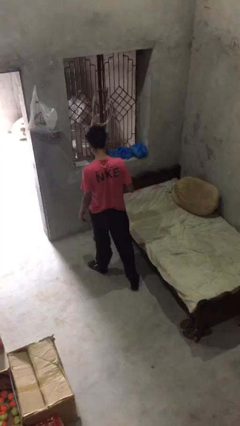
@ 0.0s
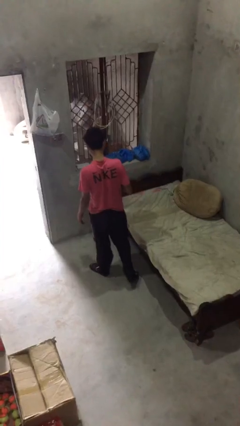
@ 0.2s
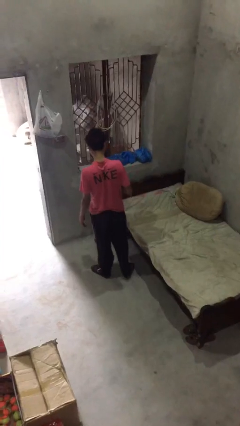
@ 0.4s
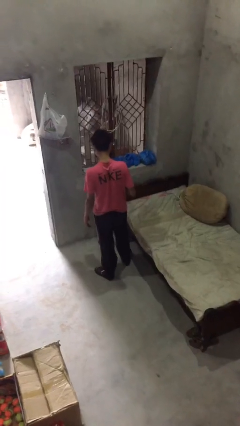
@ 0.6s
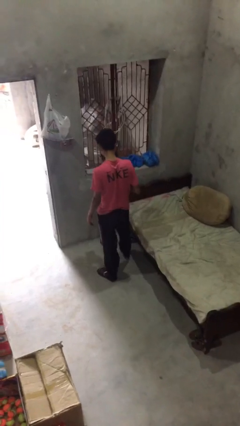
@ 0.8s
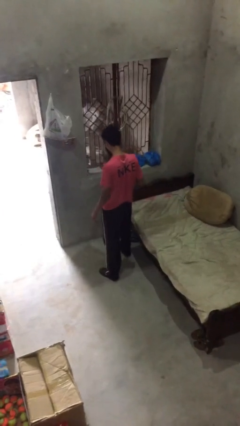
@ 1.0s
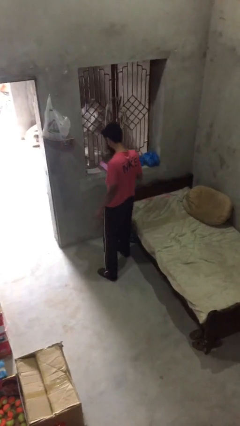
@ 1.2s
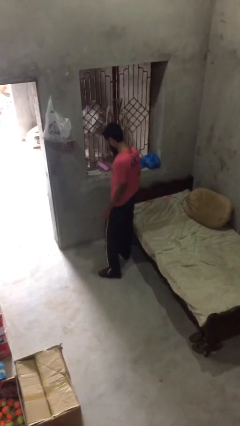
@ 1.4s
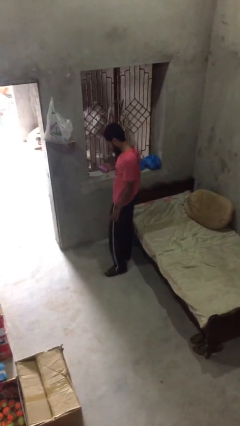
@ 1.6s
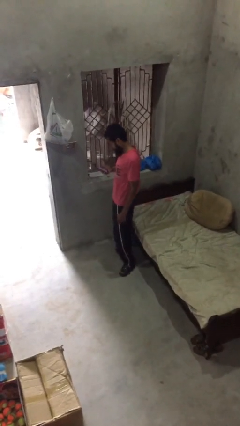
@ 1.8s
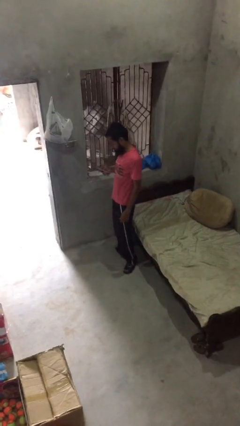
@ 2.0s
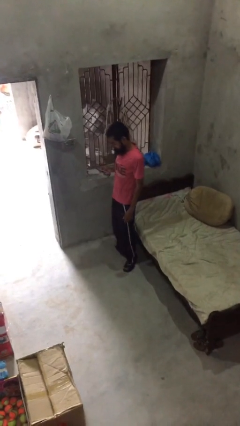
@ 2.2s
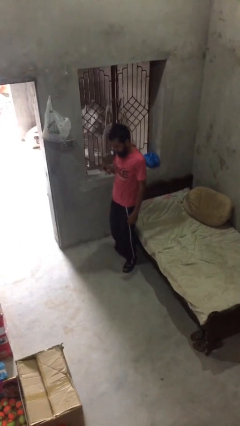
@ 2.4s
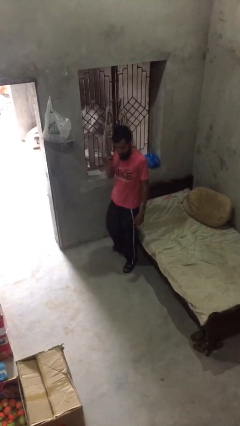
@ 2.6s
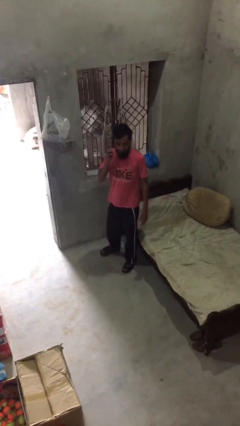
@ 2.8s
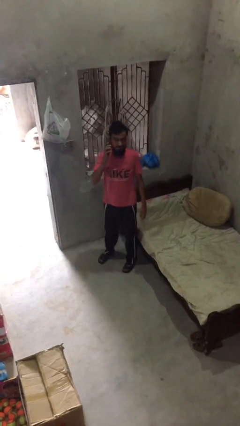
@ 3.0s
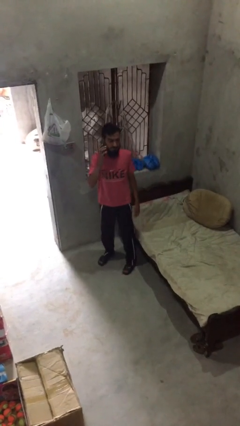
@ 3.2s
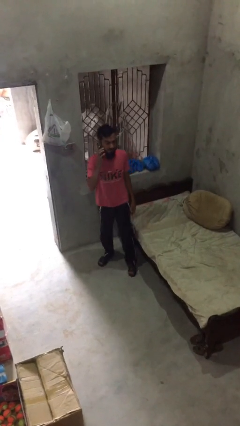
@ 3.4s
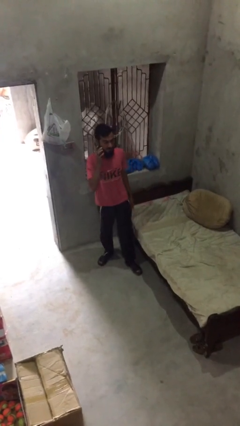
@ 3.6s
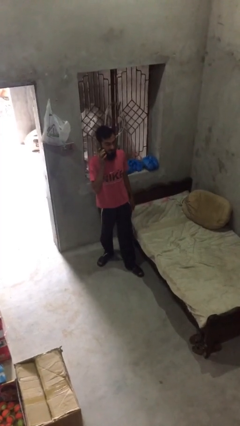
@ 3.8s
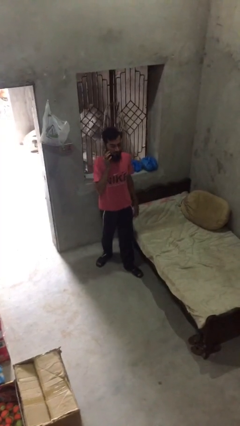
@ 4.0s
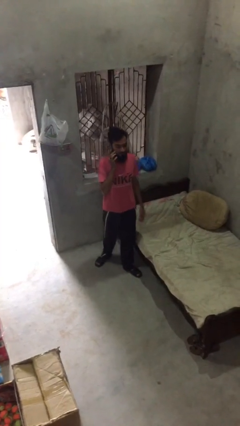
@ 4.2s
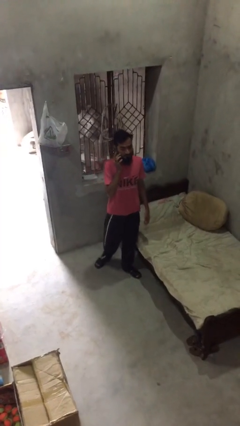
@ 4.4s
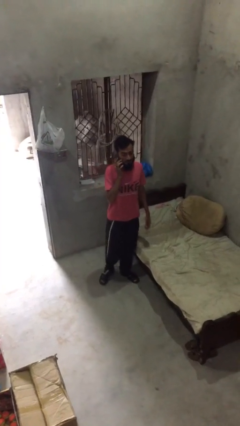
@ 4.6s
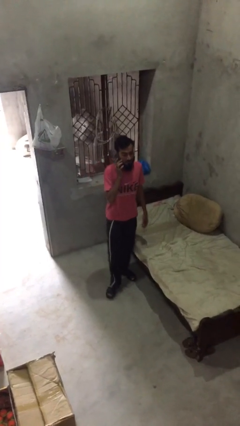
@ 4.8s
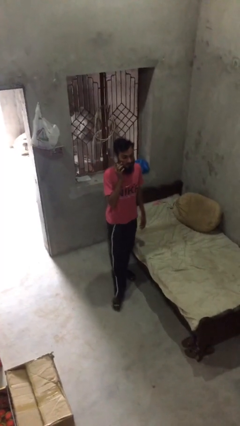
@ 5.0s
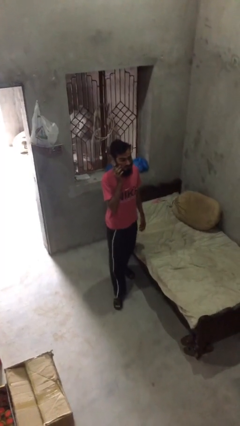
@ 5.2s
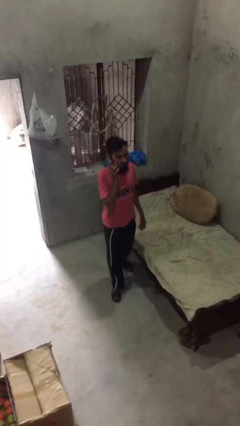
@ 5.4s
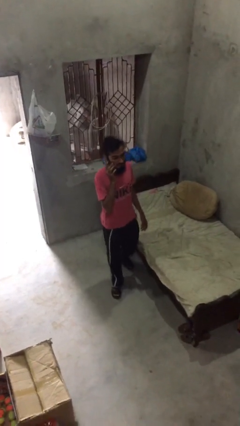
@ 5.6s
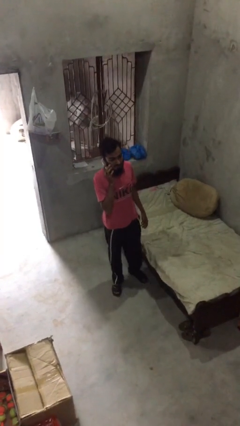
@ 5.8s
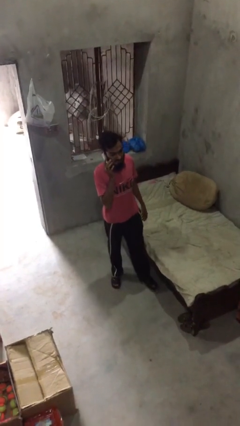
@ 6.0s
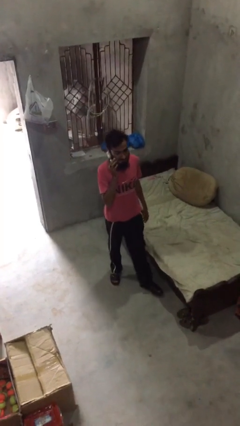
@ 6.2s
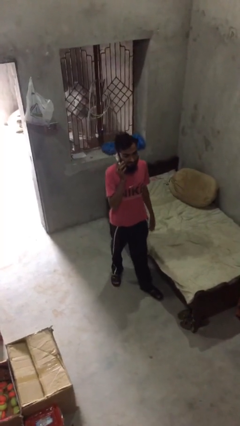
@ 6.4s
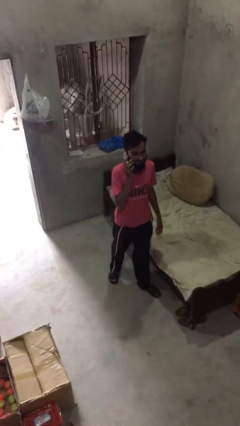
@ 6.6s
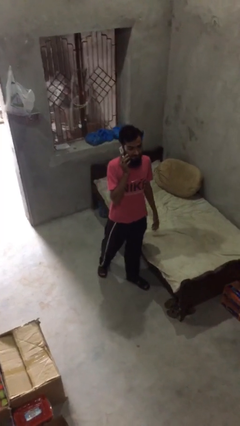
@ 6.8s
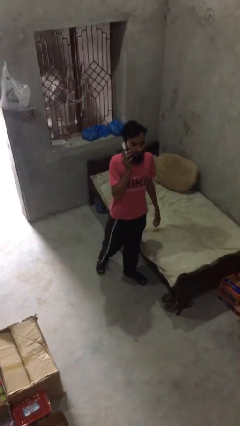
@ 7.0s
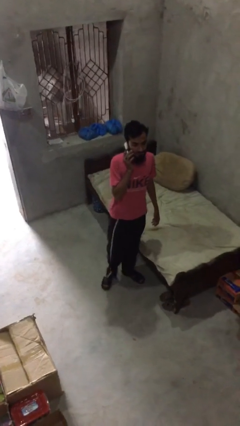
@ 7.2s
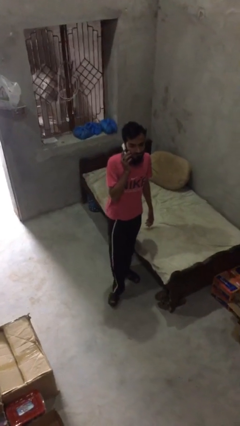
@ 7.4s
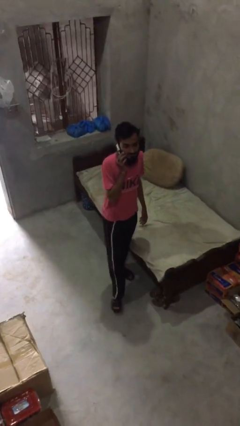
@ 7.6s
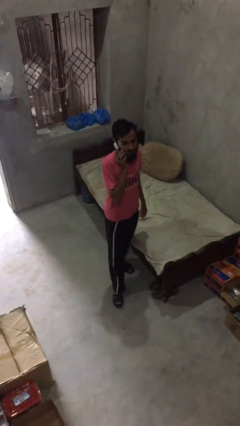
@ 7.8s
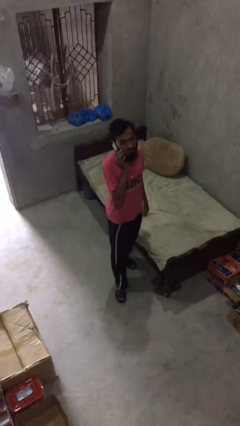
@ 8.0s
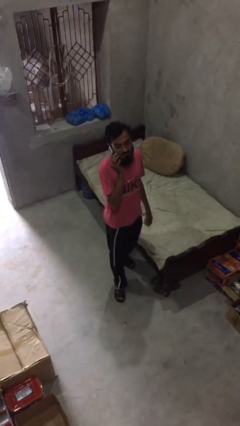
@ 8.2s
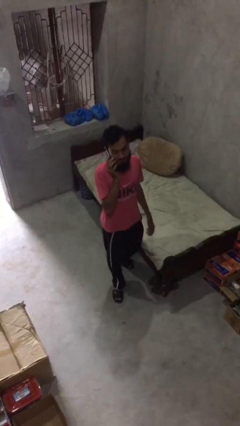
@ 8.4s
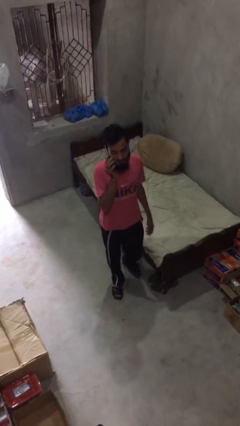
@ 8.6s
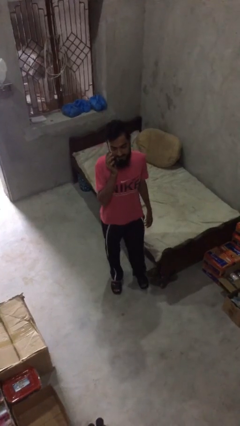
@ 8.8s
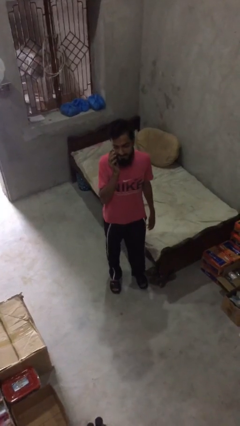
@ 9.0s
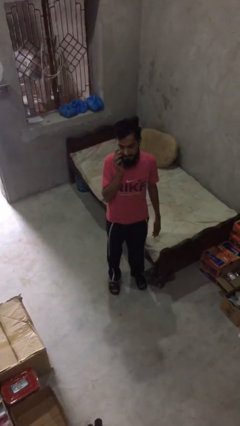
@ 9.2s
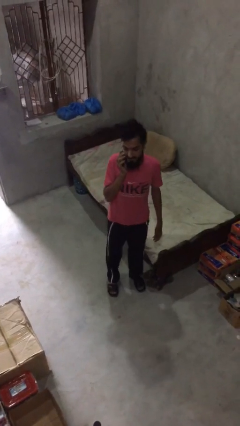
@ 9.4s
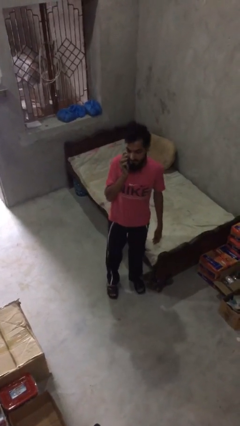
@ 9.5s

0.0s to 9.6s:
person talks on phone

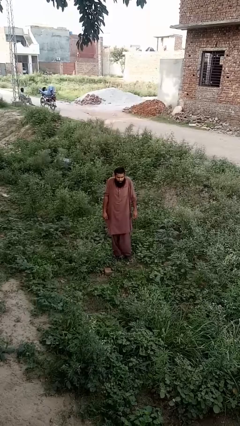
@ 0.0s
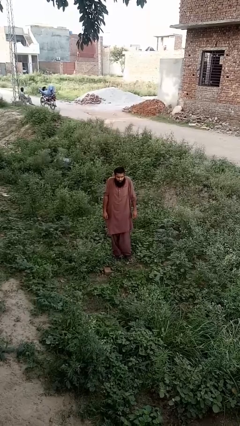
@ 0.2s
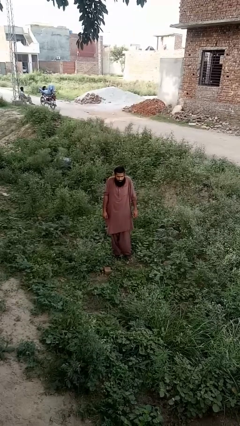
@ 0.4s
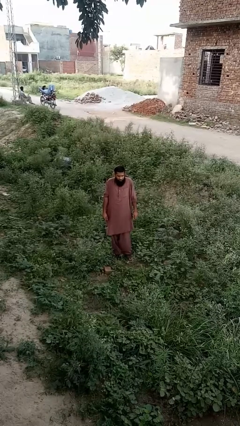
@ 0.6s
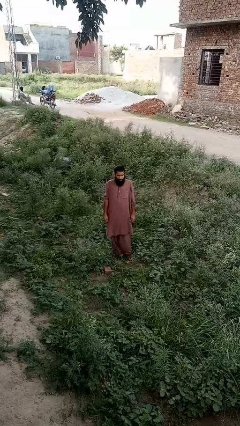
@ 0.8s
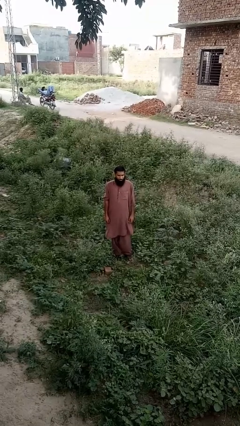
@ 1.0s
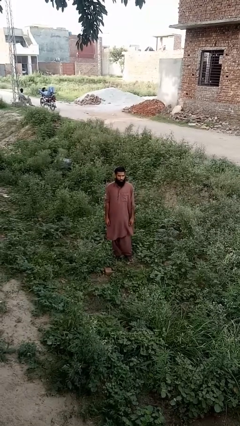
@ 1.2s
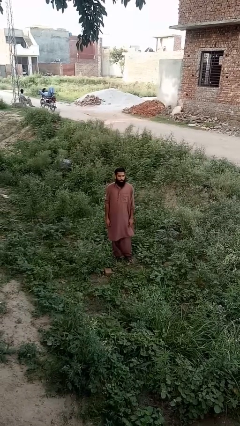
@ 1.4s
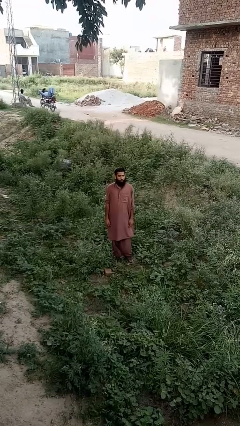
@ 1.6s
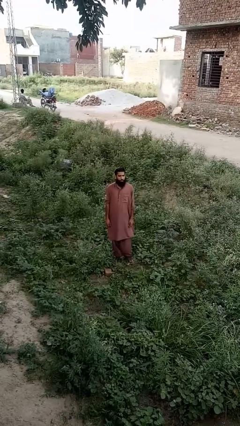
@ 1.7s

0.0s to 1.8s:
person shrugs

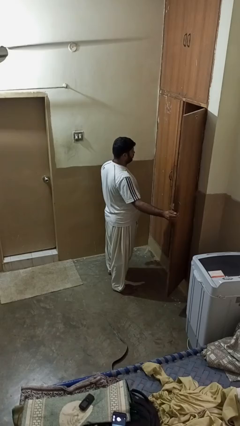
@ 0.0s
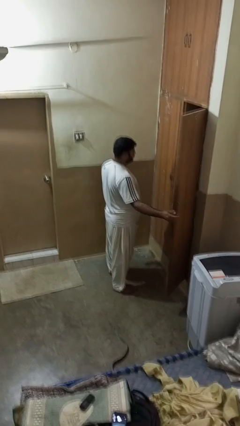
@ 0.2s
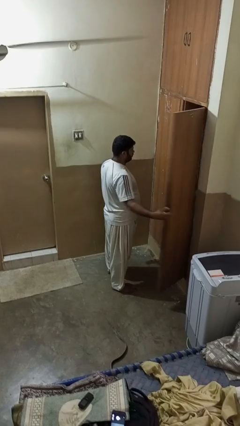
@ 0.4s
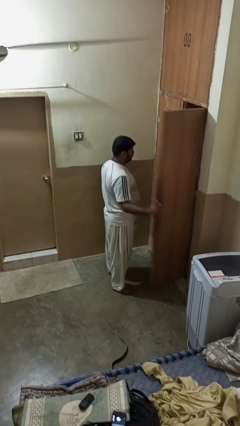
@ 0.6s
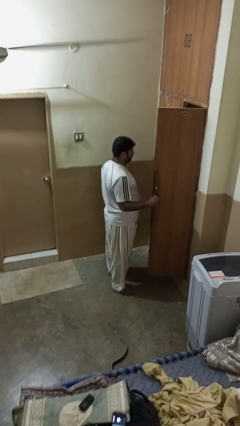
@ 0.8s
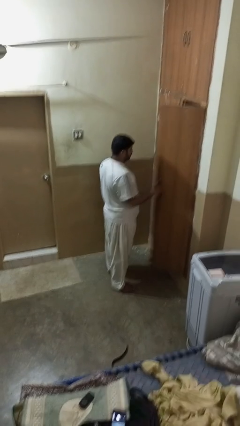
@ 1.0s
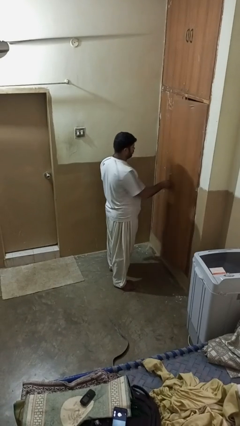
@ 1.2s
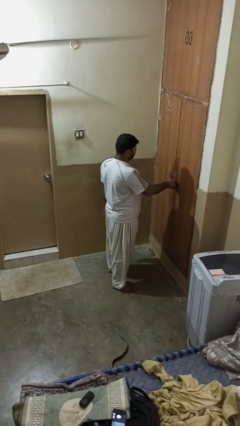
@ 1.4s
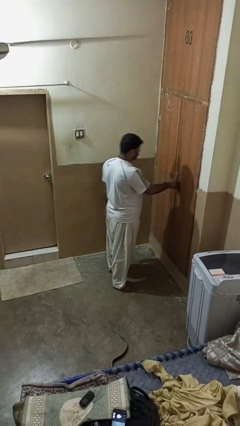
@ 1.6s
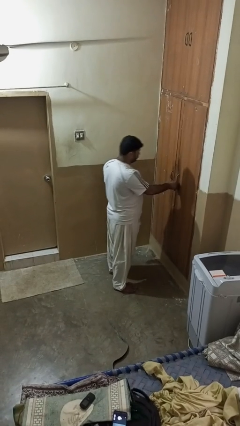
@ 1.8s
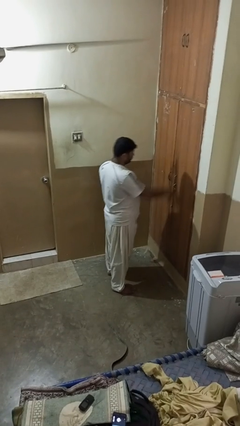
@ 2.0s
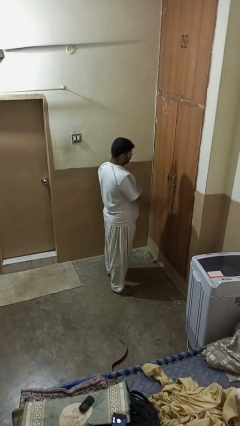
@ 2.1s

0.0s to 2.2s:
person closes closet door

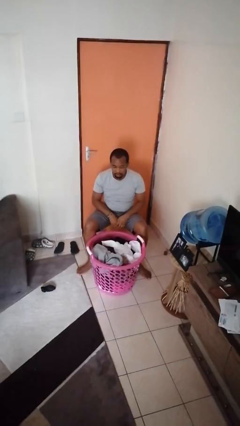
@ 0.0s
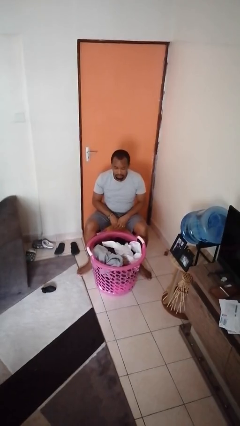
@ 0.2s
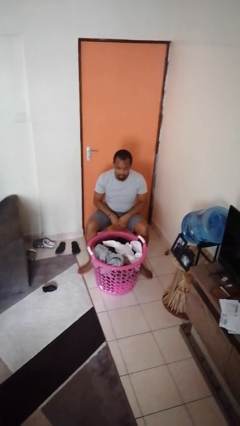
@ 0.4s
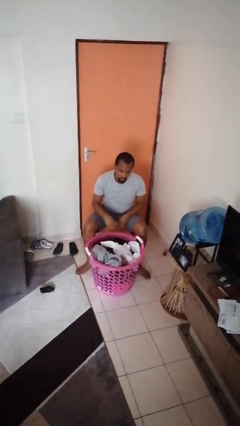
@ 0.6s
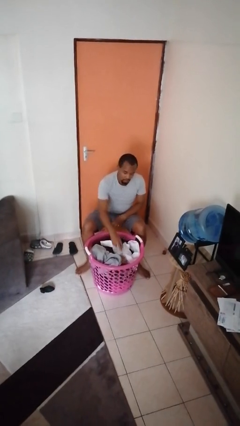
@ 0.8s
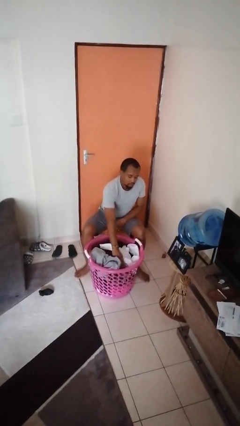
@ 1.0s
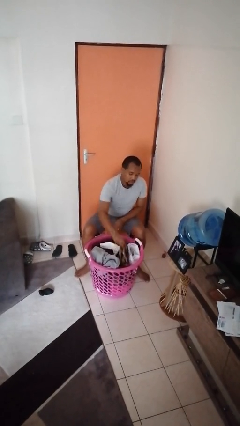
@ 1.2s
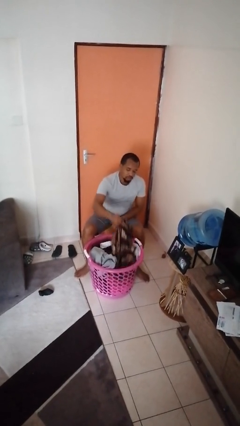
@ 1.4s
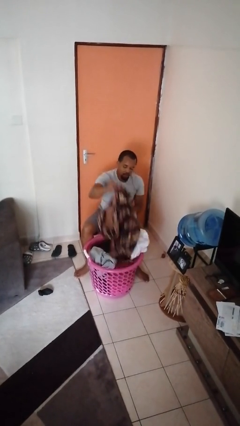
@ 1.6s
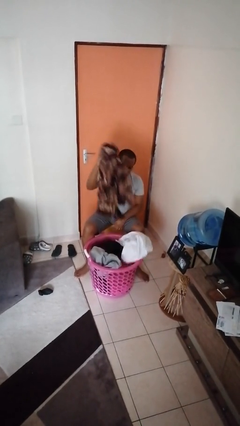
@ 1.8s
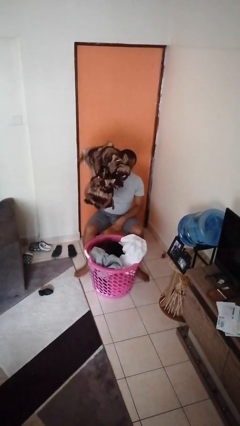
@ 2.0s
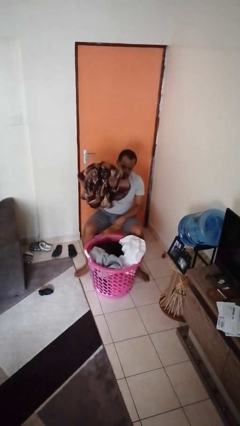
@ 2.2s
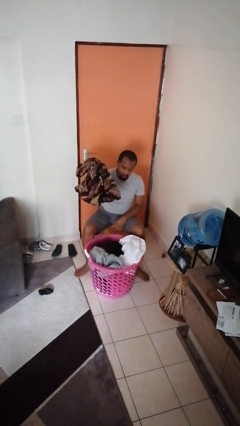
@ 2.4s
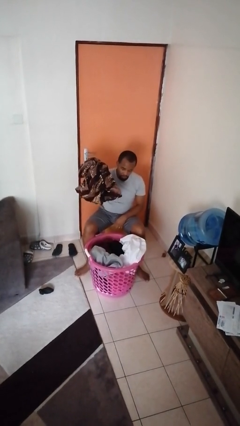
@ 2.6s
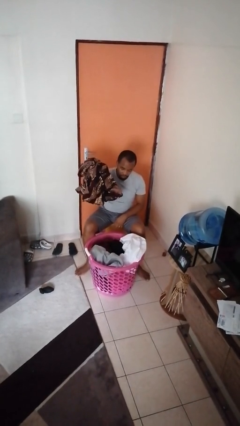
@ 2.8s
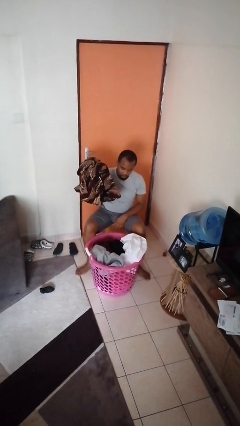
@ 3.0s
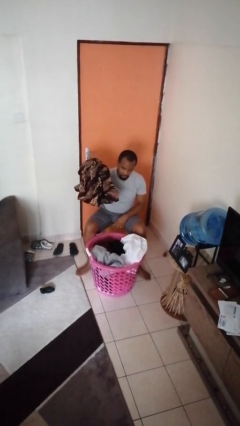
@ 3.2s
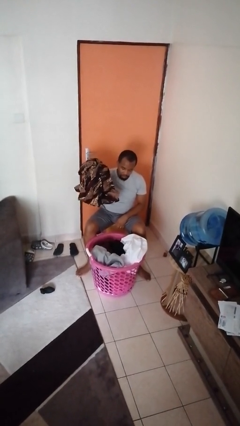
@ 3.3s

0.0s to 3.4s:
person takes object from basket

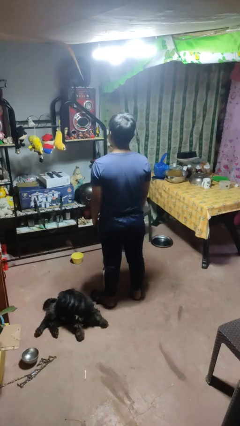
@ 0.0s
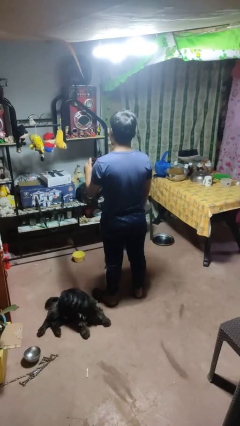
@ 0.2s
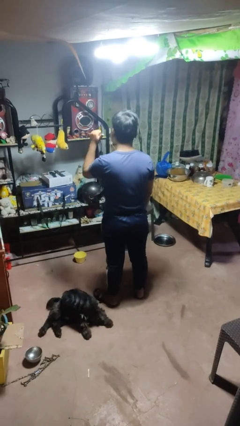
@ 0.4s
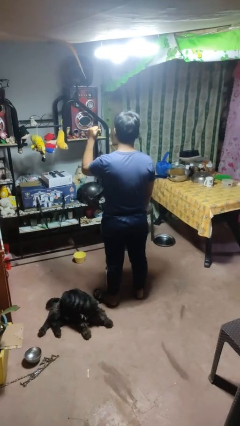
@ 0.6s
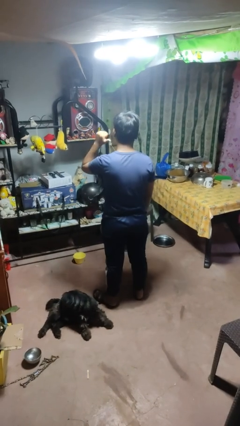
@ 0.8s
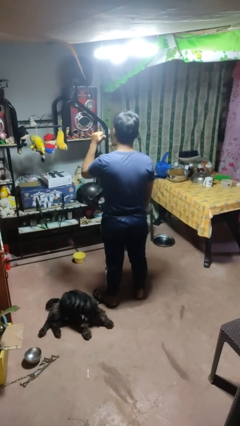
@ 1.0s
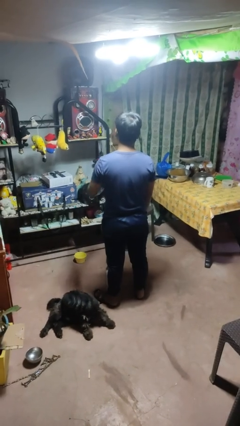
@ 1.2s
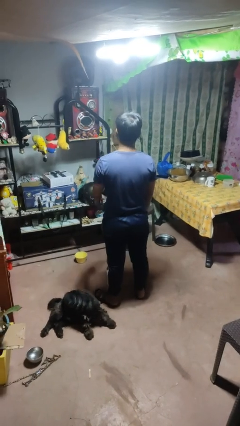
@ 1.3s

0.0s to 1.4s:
person gestures behind me
